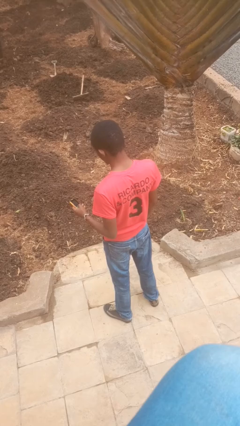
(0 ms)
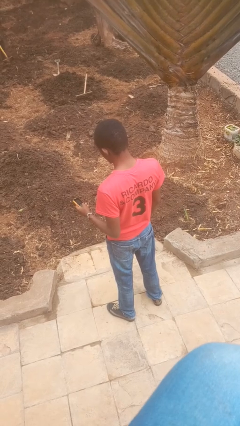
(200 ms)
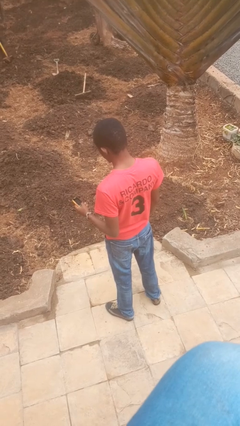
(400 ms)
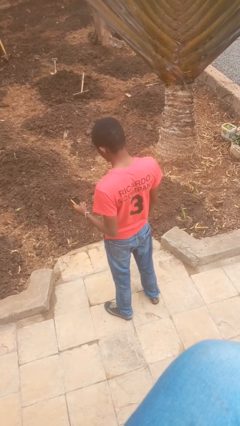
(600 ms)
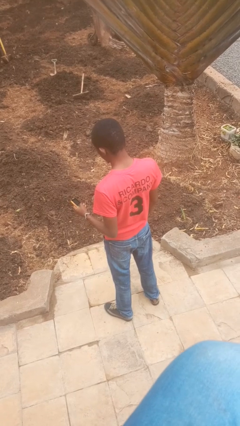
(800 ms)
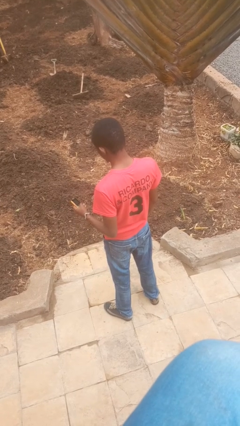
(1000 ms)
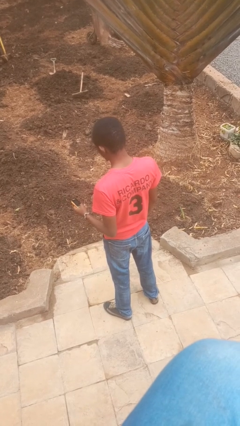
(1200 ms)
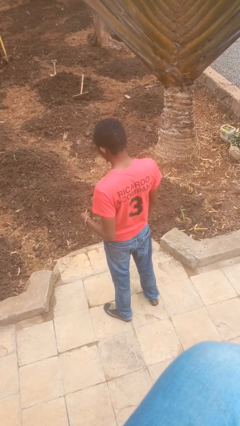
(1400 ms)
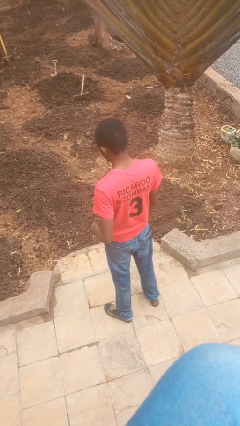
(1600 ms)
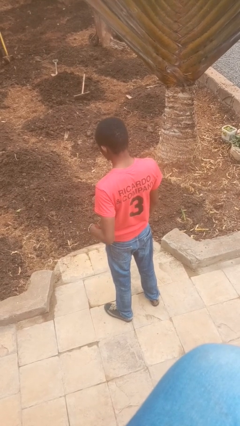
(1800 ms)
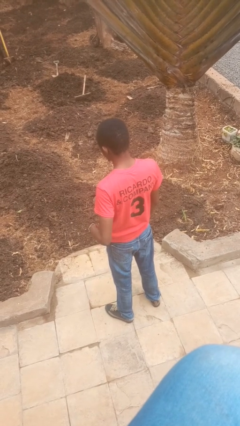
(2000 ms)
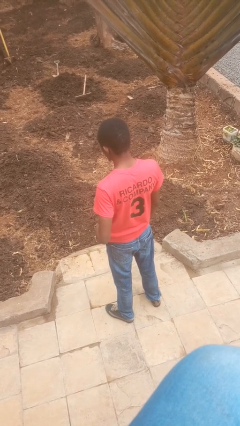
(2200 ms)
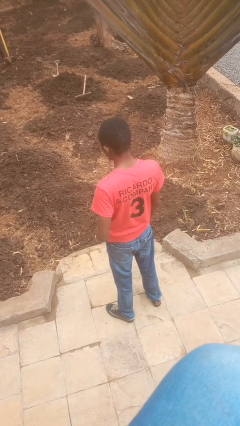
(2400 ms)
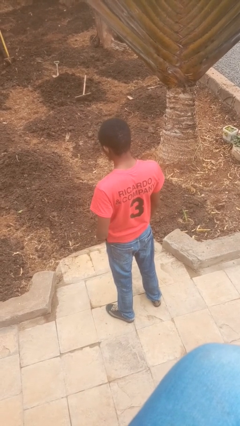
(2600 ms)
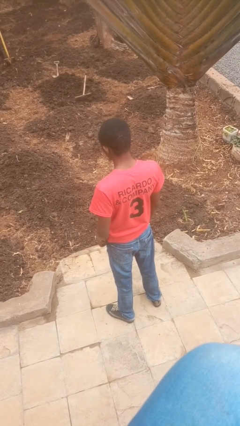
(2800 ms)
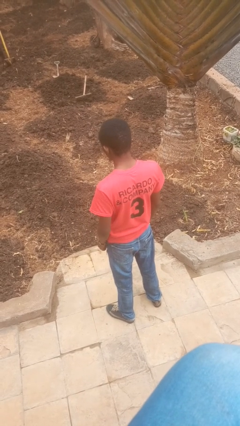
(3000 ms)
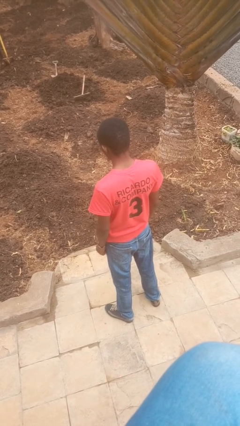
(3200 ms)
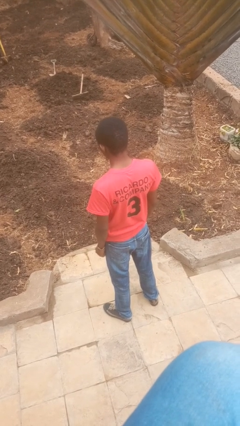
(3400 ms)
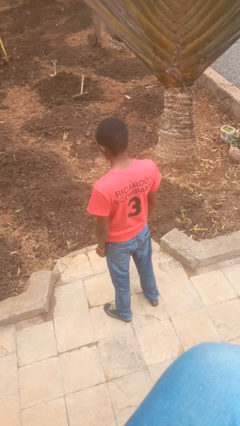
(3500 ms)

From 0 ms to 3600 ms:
person puts phone into pocket

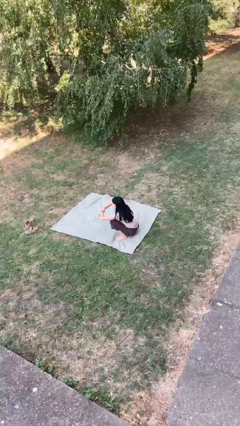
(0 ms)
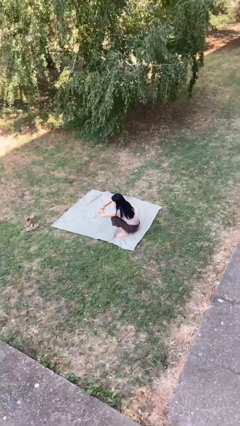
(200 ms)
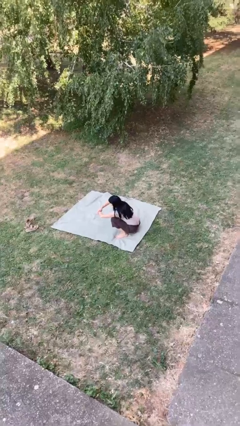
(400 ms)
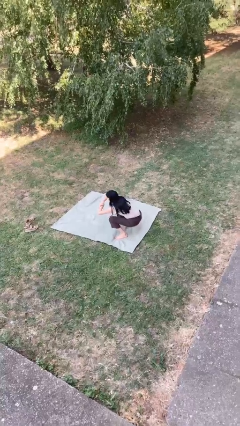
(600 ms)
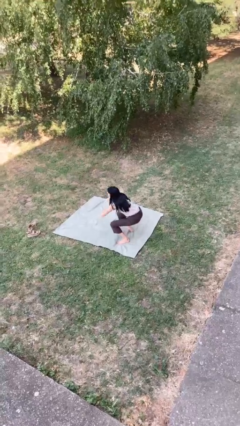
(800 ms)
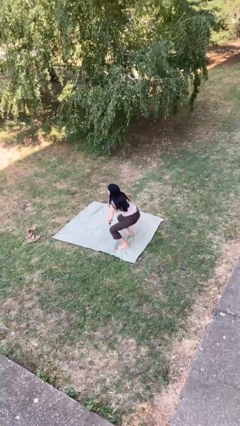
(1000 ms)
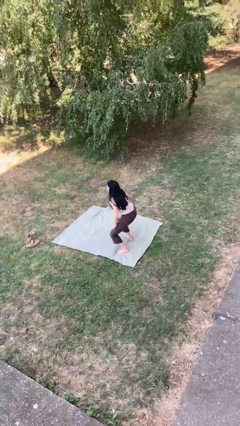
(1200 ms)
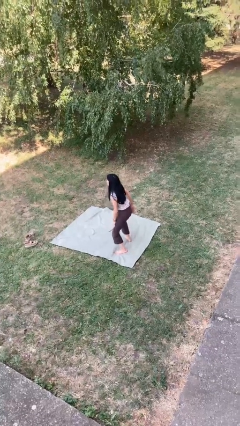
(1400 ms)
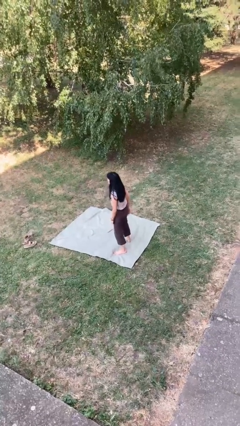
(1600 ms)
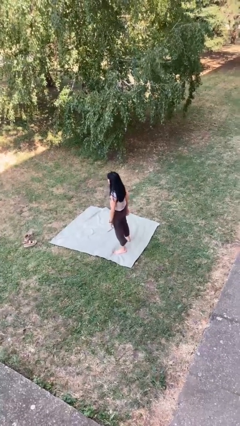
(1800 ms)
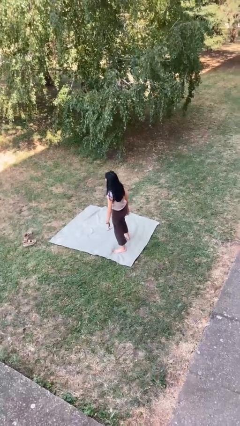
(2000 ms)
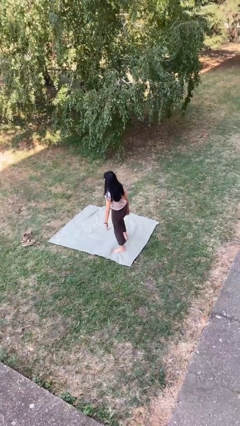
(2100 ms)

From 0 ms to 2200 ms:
person stands up

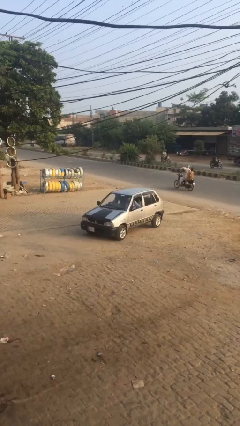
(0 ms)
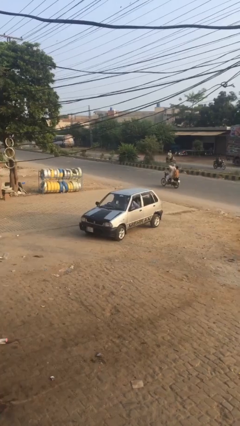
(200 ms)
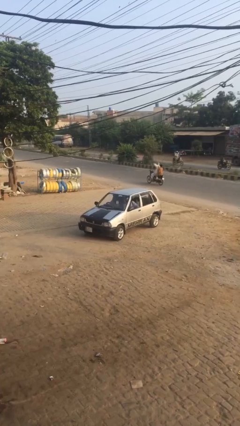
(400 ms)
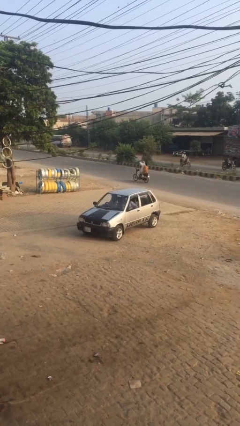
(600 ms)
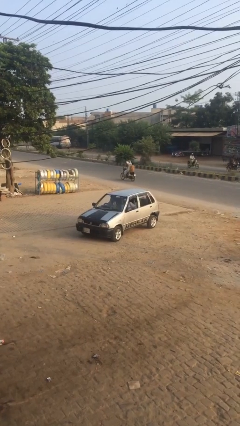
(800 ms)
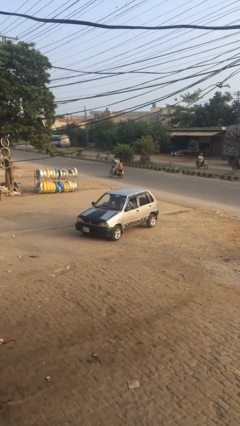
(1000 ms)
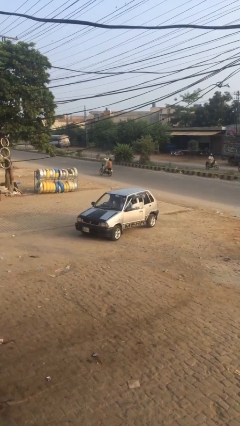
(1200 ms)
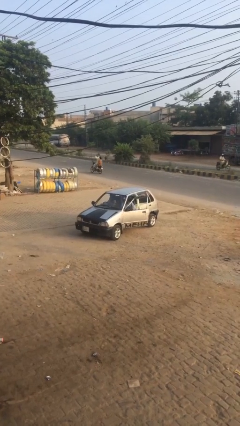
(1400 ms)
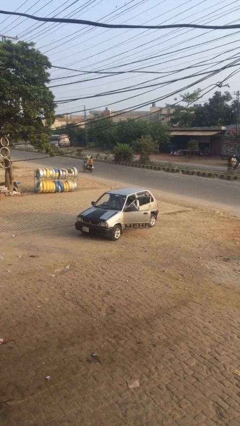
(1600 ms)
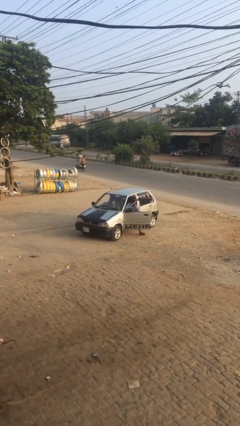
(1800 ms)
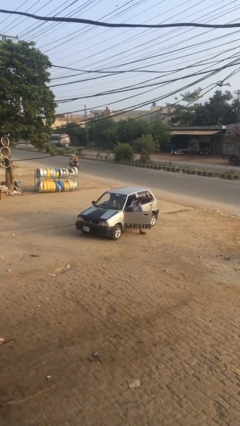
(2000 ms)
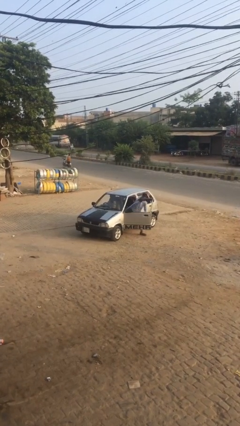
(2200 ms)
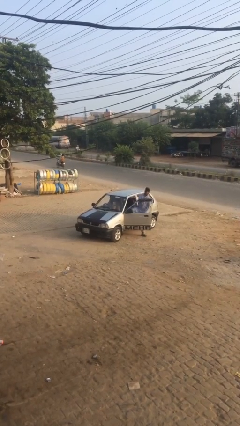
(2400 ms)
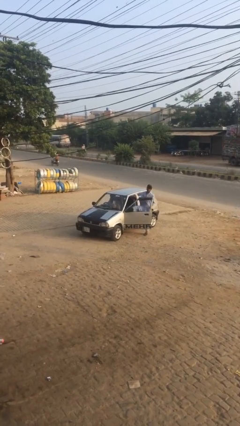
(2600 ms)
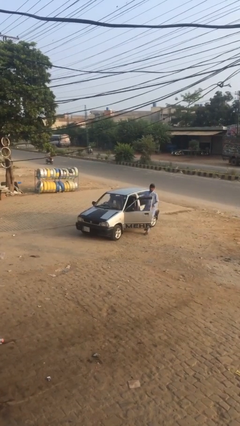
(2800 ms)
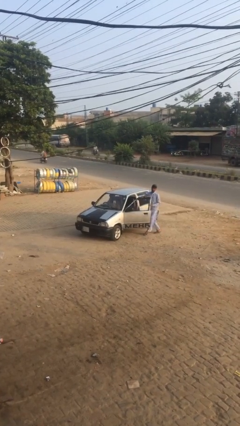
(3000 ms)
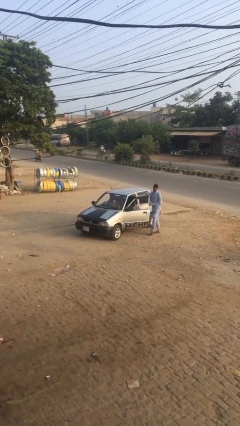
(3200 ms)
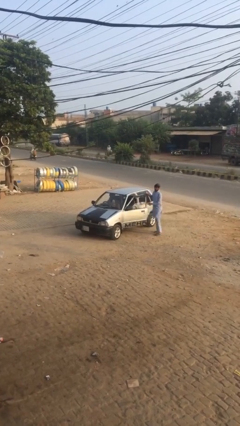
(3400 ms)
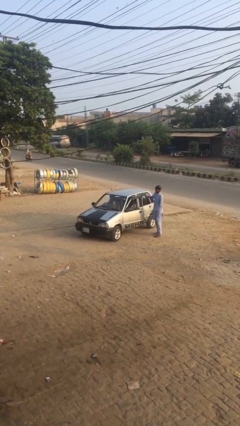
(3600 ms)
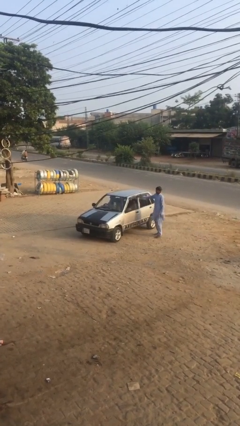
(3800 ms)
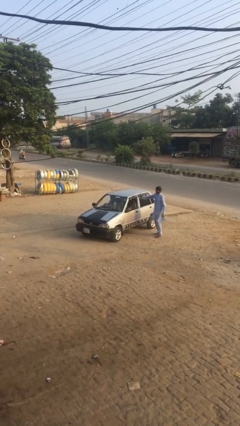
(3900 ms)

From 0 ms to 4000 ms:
car drops off person

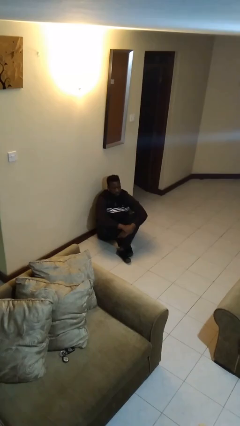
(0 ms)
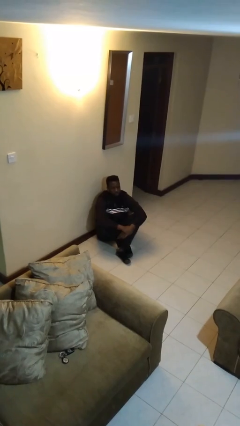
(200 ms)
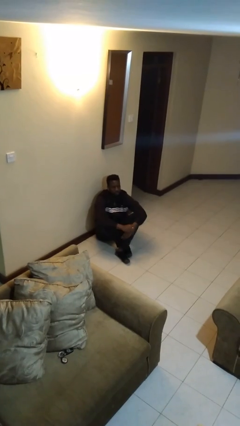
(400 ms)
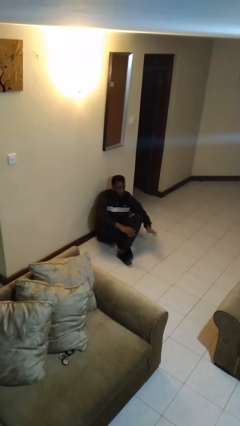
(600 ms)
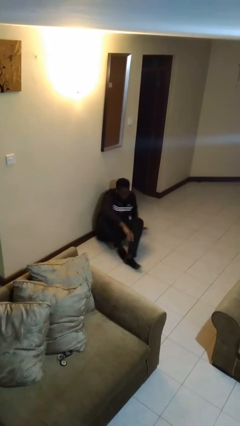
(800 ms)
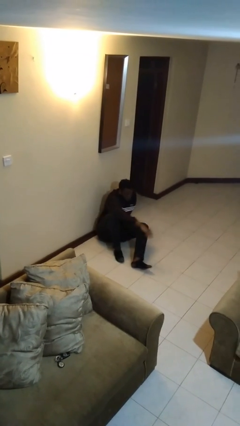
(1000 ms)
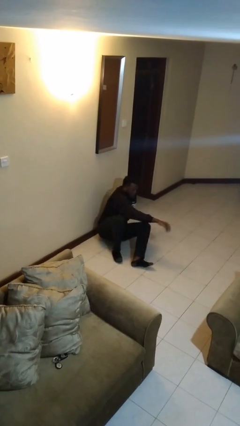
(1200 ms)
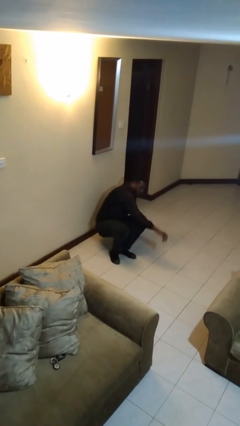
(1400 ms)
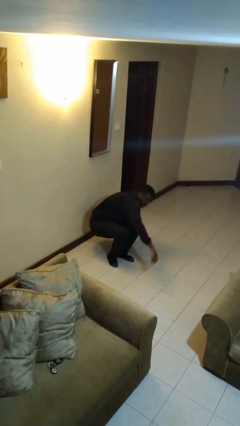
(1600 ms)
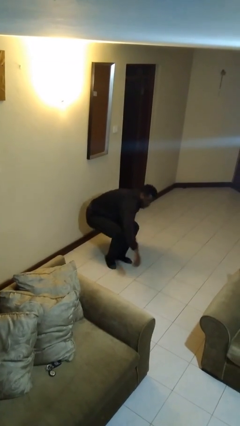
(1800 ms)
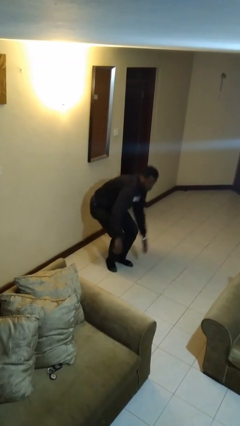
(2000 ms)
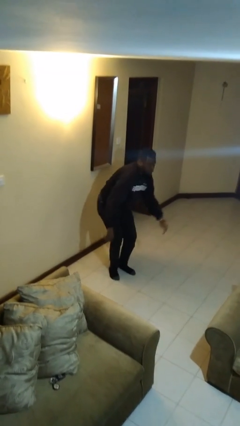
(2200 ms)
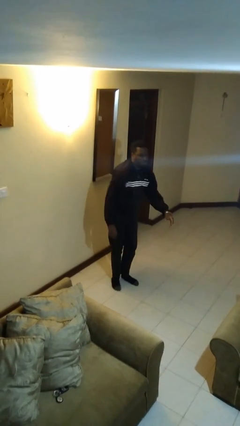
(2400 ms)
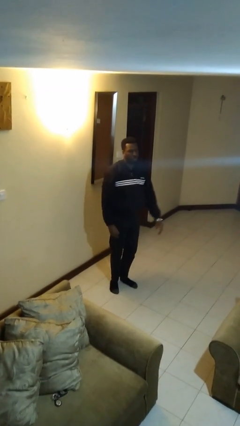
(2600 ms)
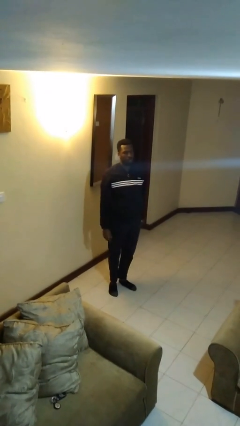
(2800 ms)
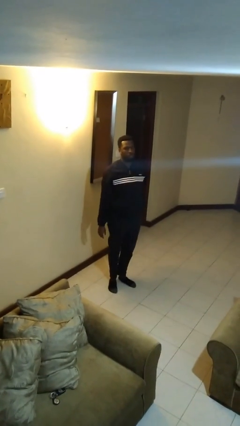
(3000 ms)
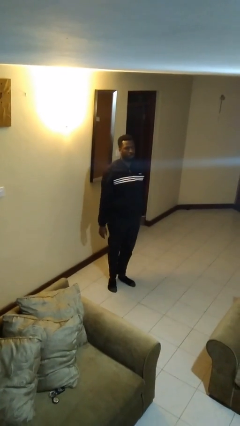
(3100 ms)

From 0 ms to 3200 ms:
person stands up from floor

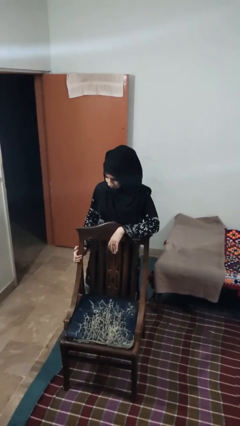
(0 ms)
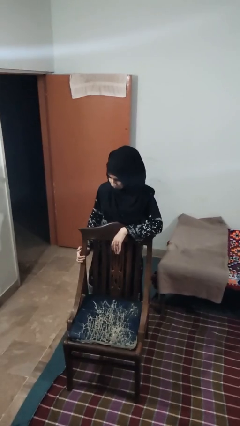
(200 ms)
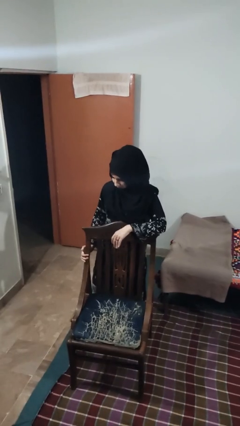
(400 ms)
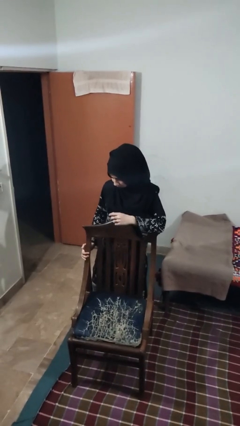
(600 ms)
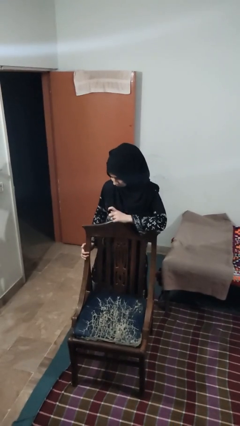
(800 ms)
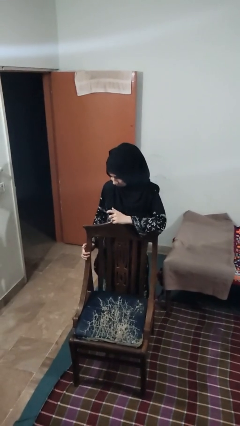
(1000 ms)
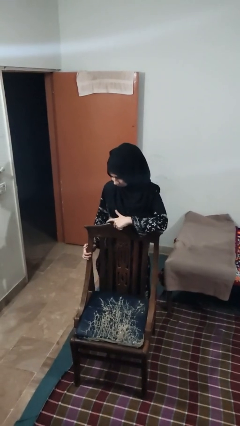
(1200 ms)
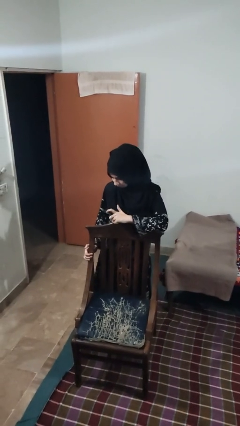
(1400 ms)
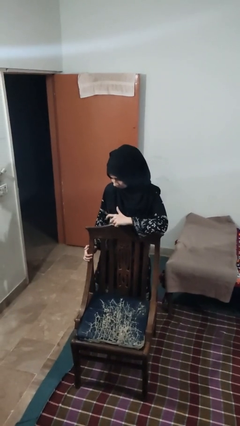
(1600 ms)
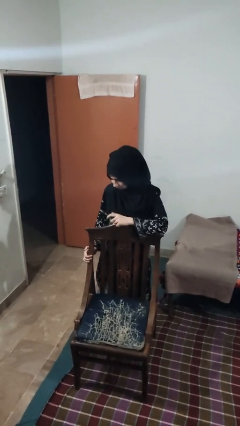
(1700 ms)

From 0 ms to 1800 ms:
person taps object with finger

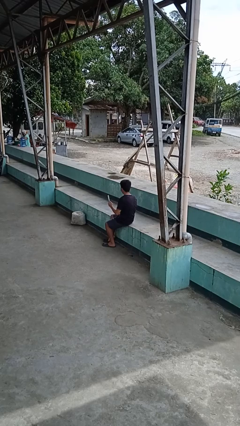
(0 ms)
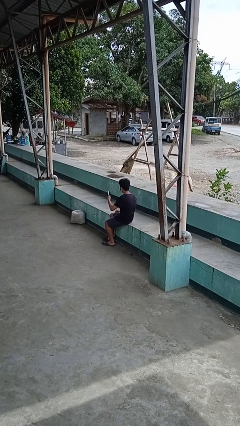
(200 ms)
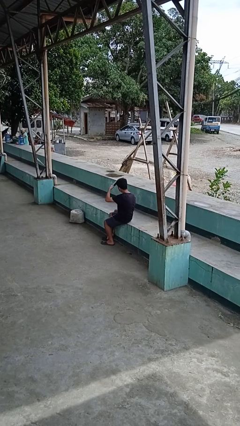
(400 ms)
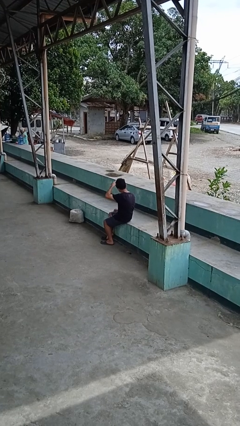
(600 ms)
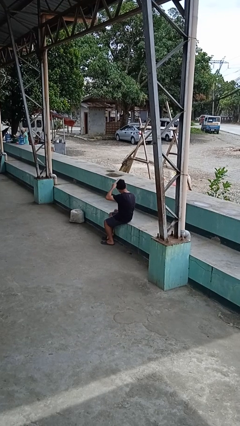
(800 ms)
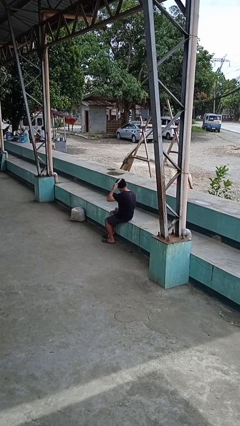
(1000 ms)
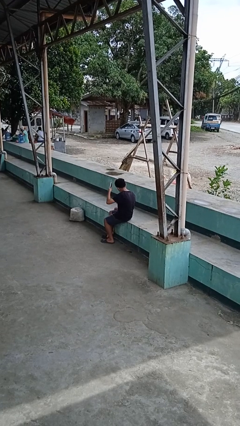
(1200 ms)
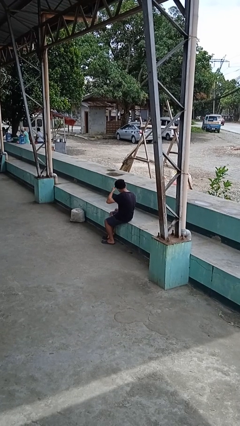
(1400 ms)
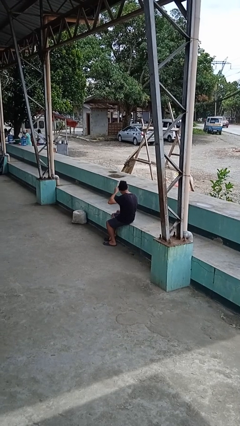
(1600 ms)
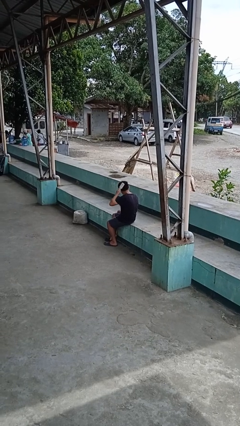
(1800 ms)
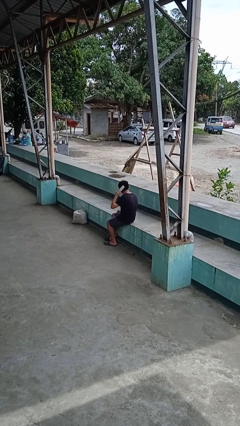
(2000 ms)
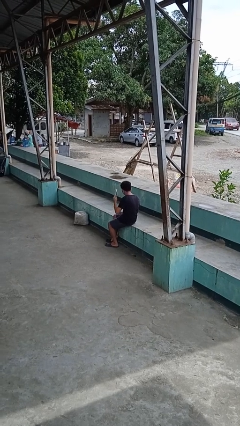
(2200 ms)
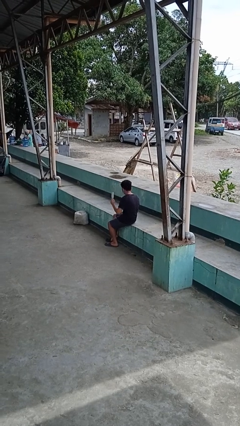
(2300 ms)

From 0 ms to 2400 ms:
person brushes hair
